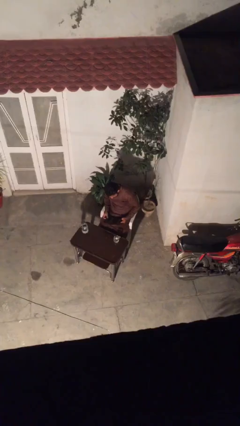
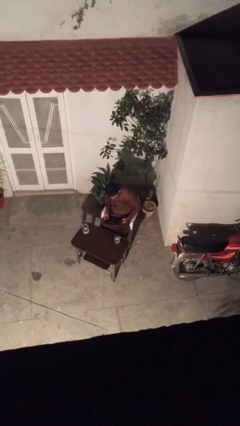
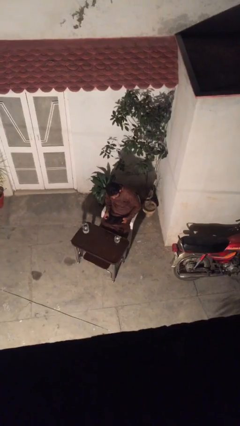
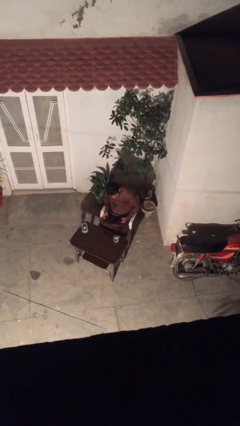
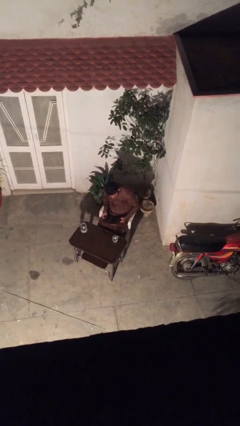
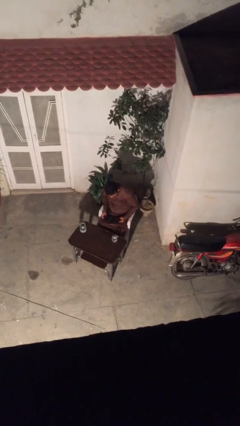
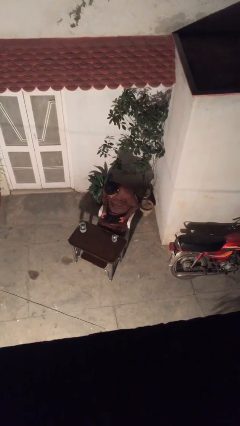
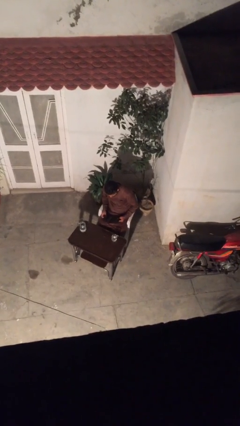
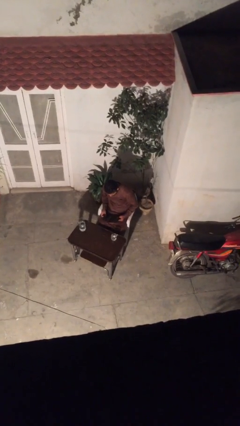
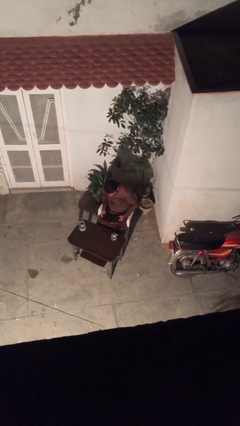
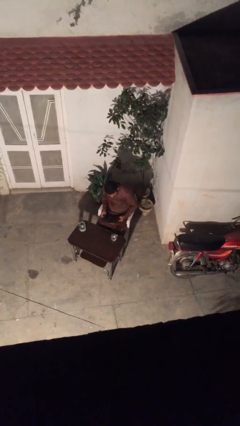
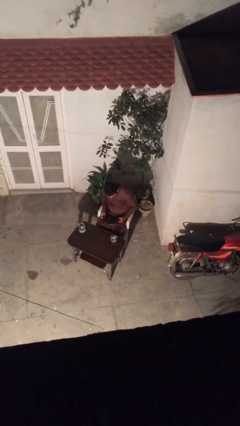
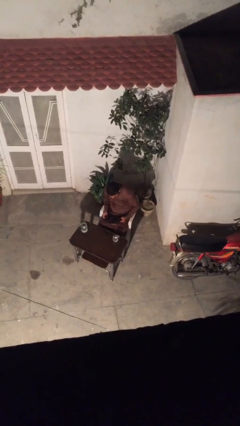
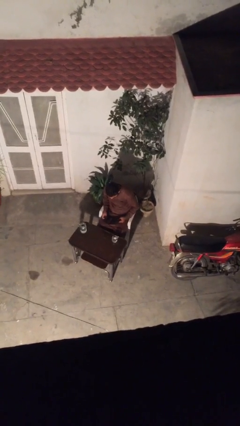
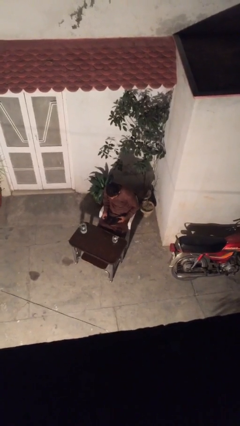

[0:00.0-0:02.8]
person reads document

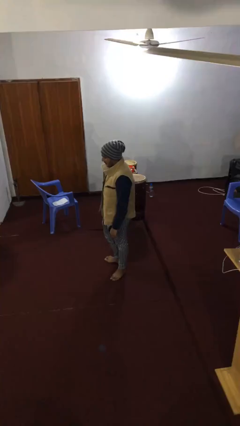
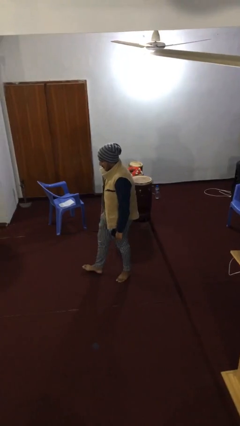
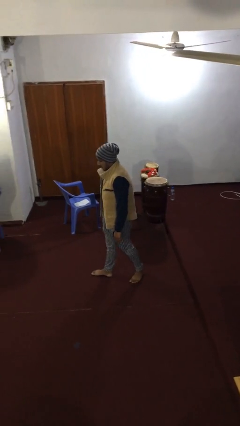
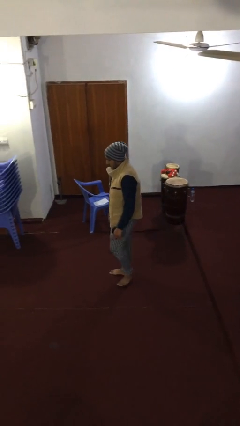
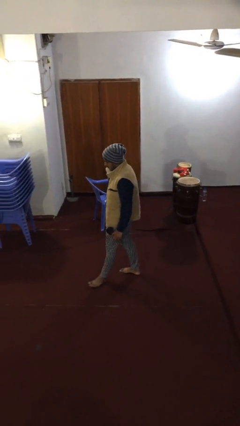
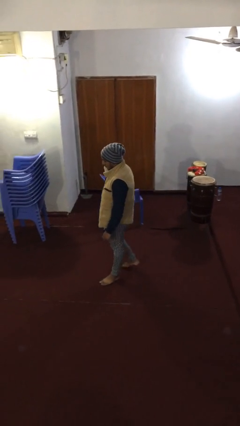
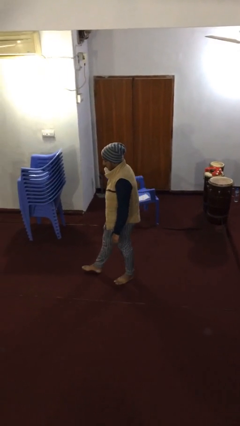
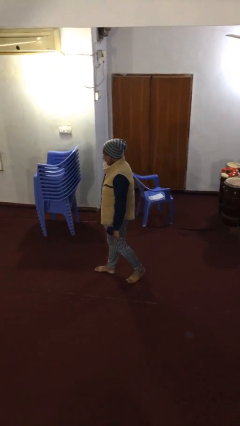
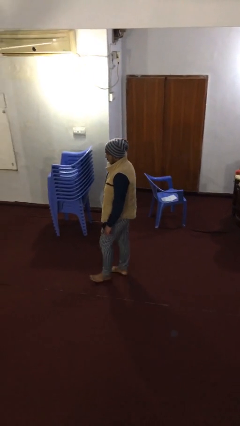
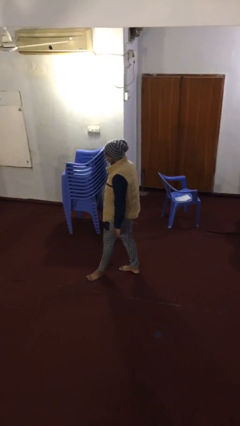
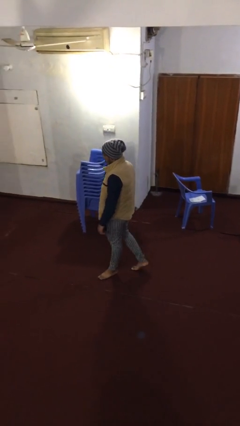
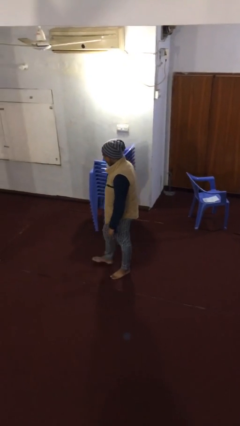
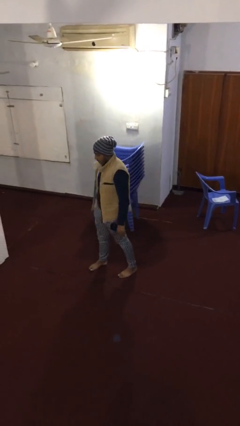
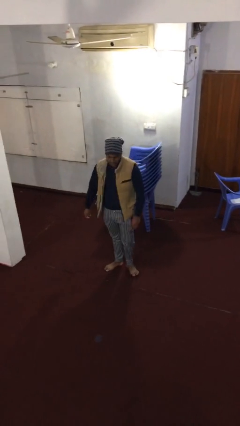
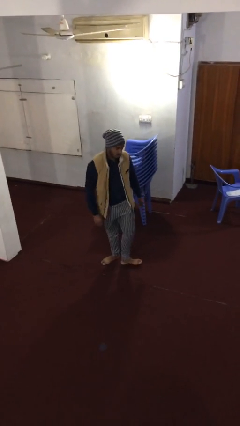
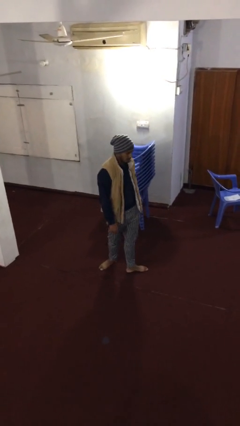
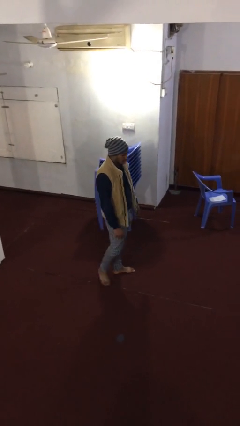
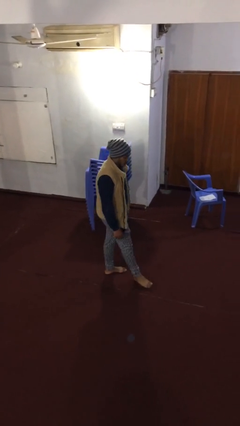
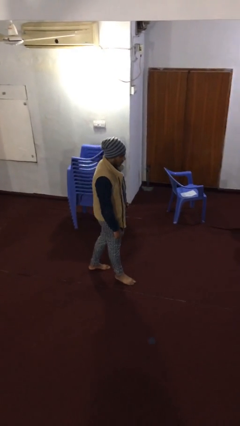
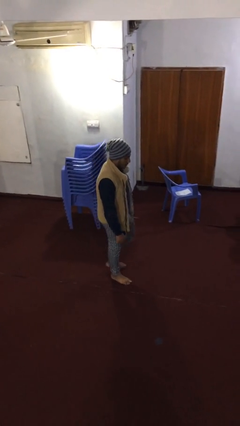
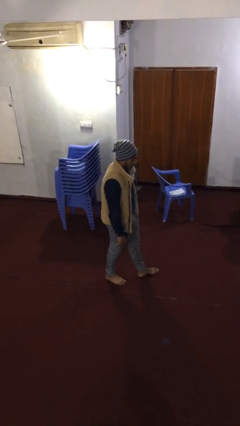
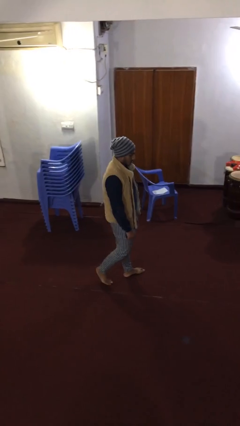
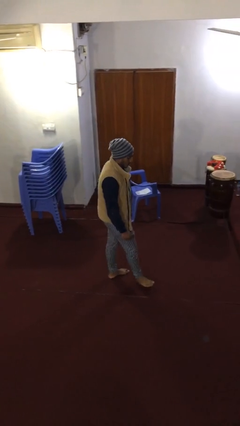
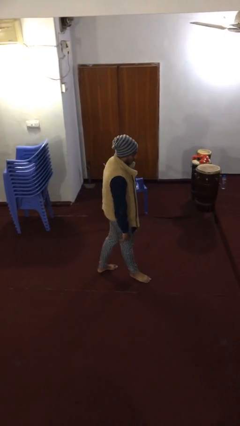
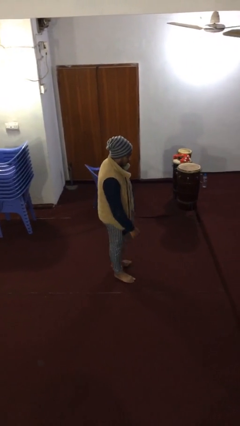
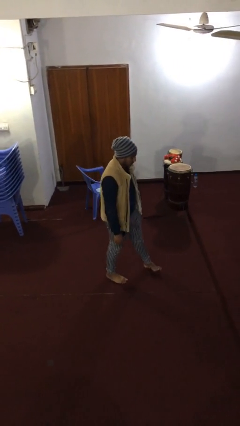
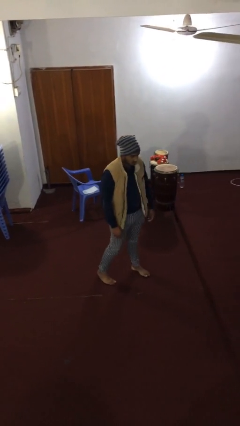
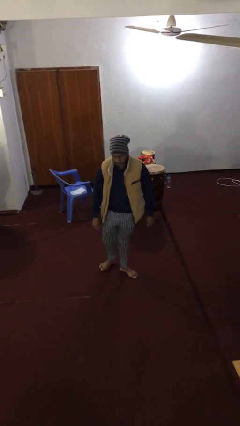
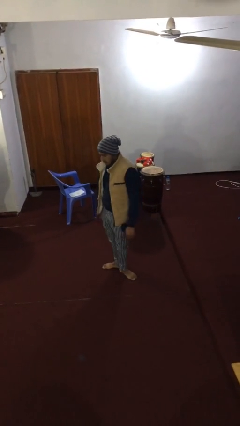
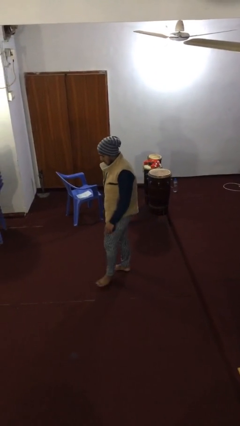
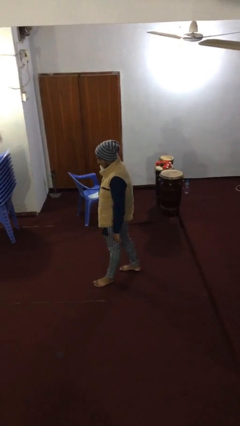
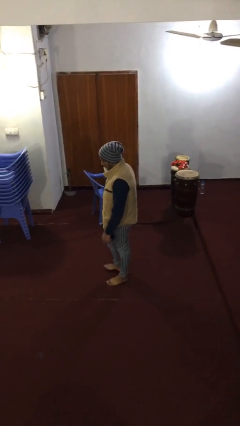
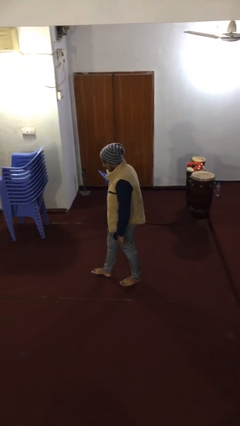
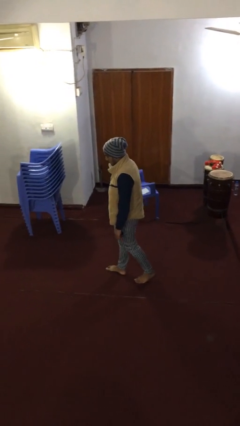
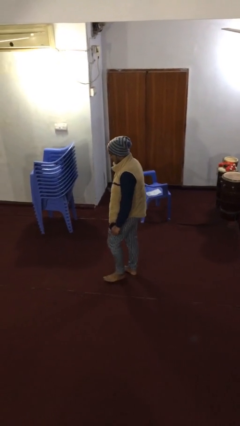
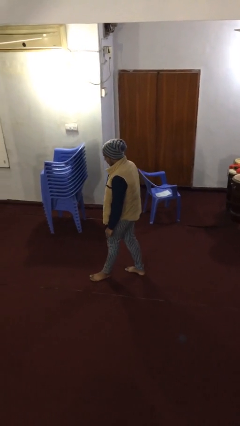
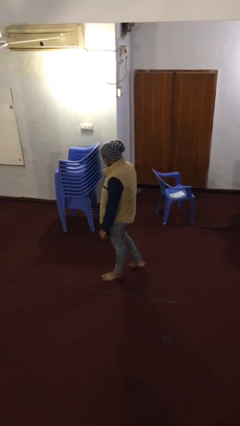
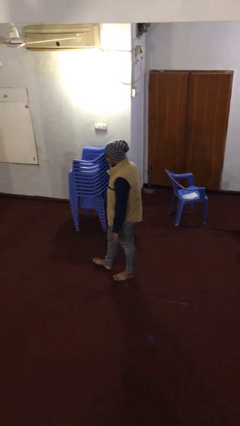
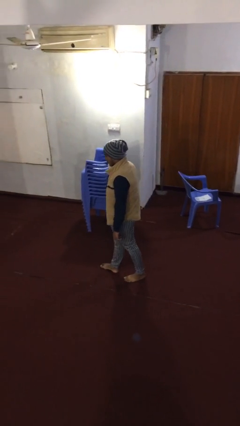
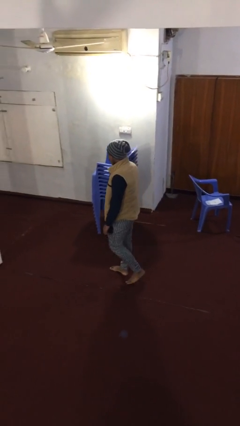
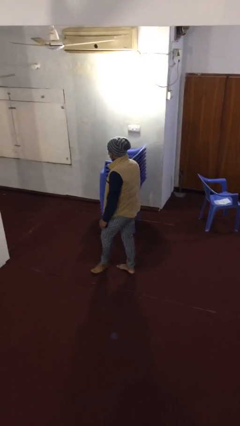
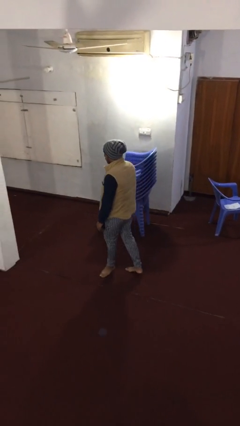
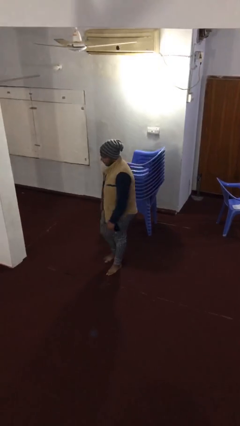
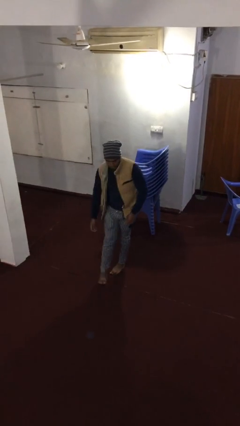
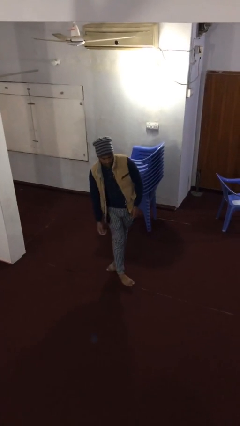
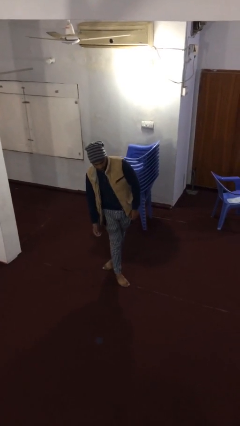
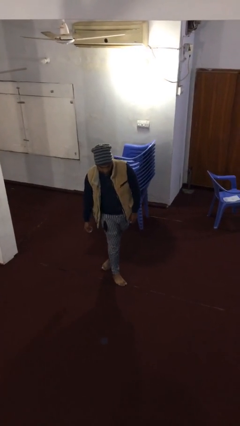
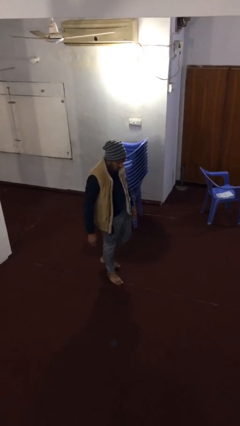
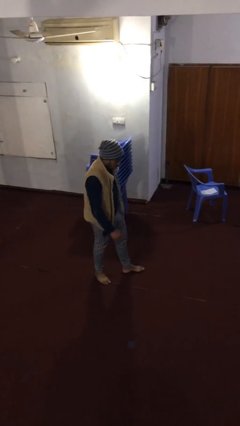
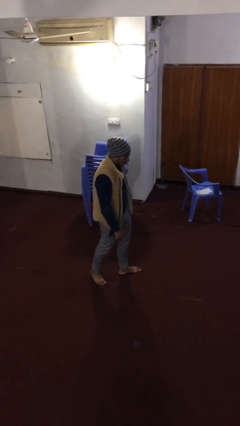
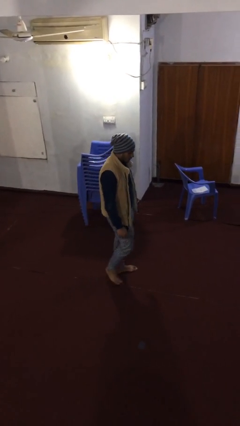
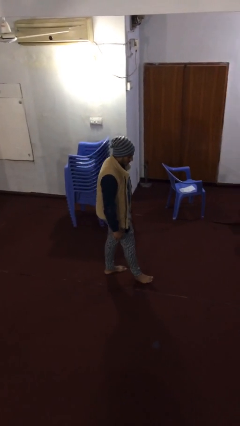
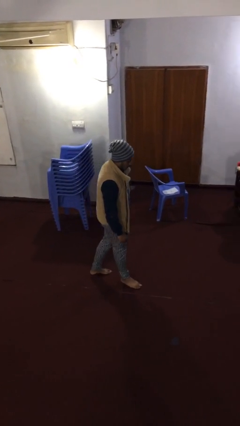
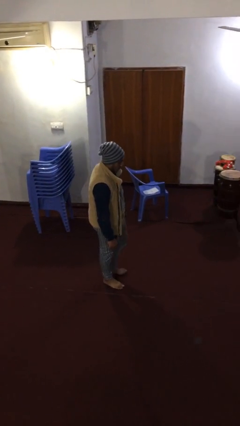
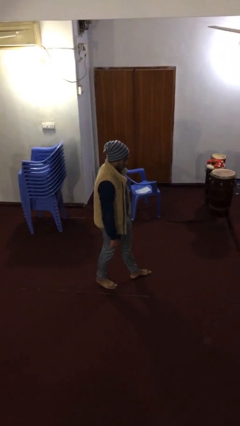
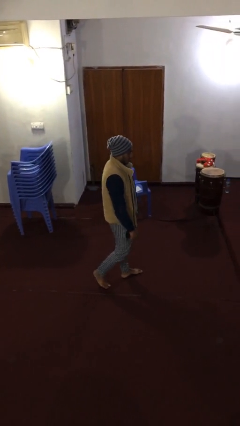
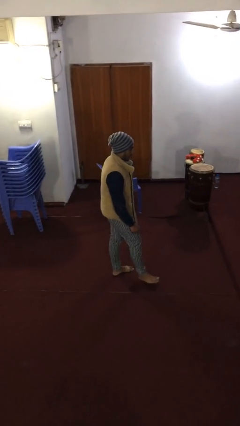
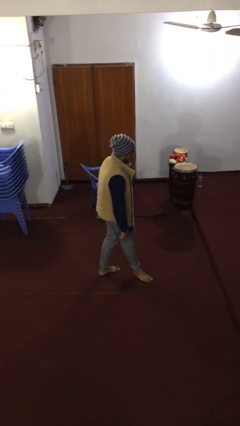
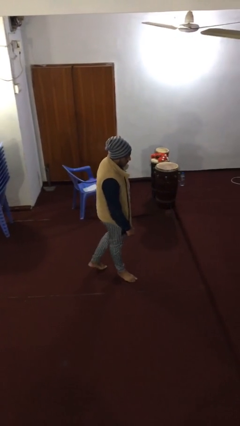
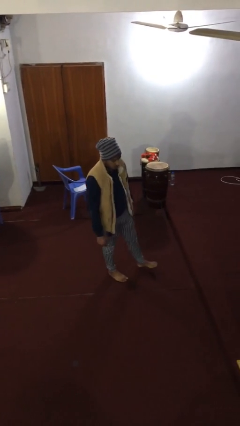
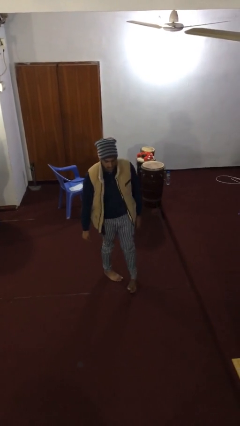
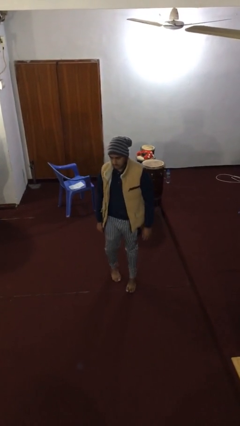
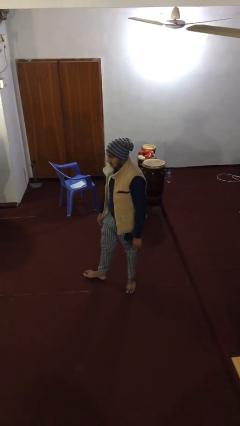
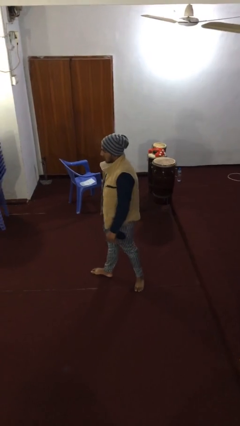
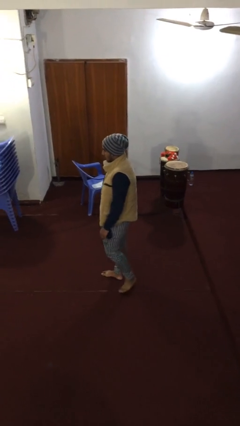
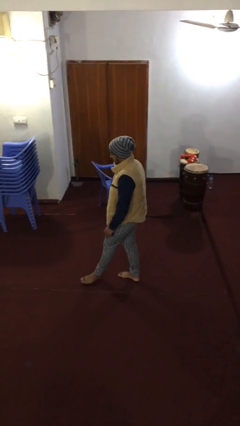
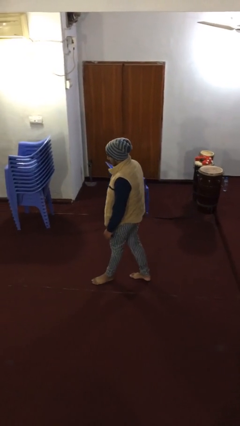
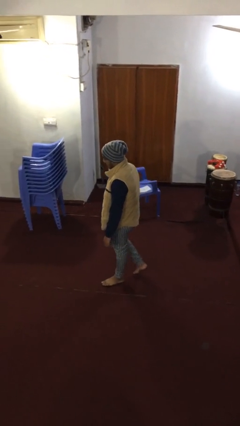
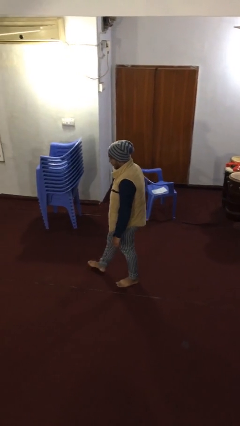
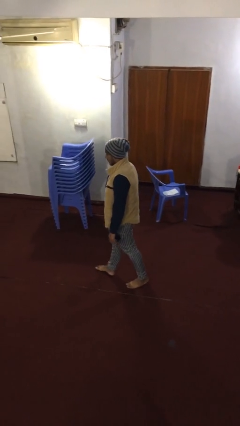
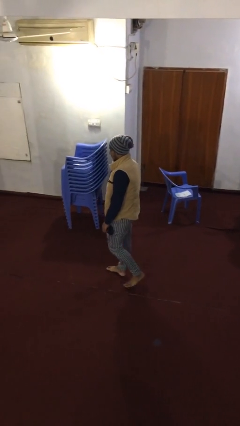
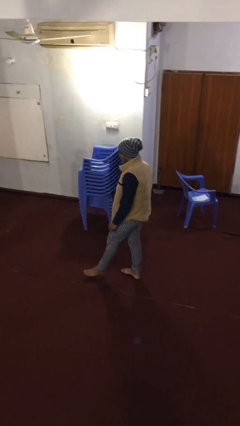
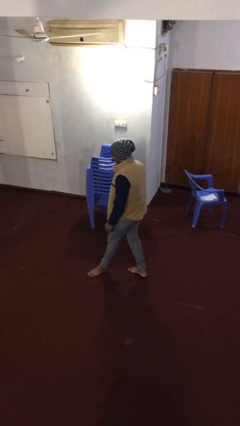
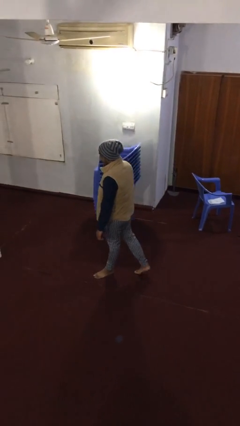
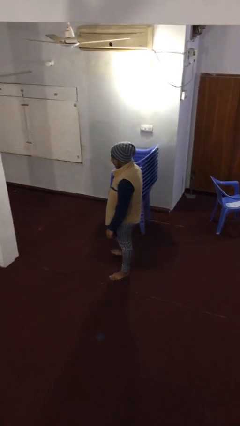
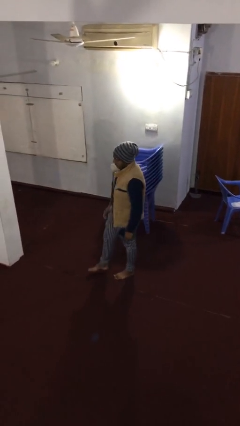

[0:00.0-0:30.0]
person walks

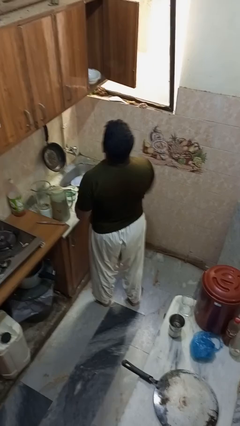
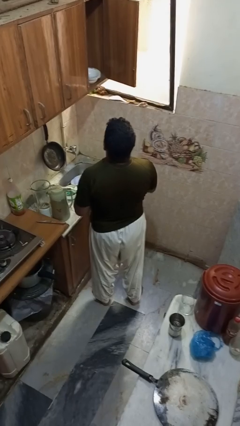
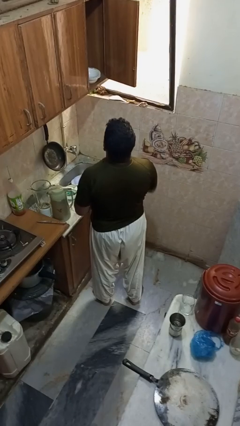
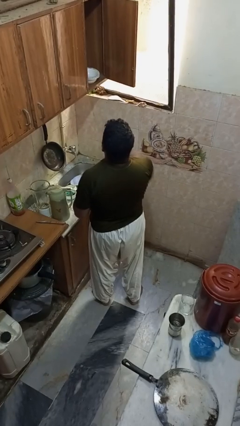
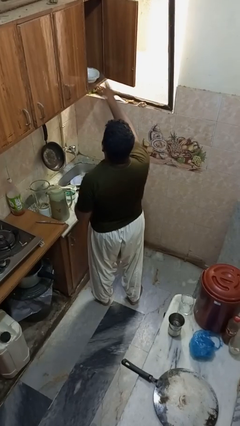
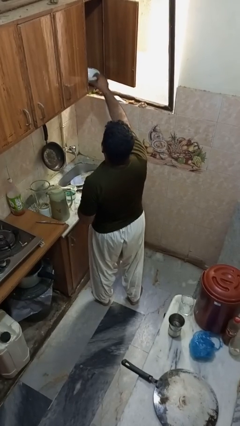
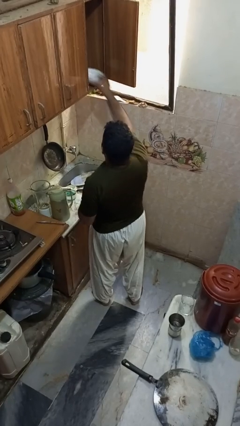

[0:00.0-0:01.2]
person takes object from cabinet
